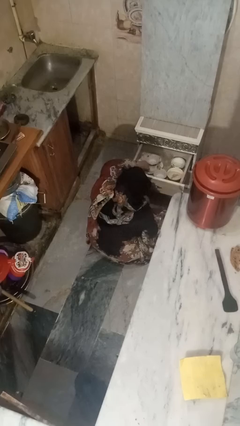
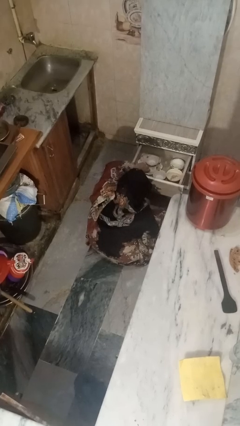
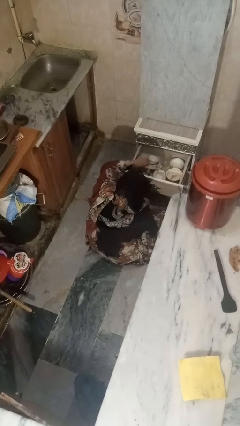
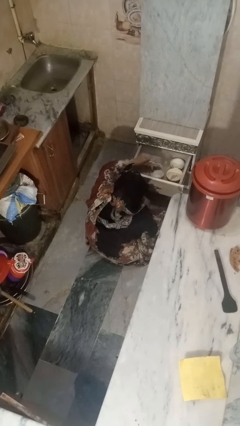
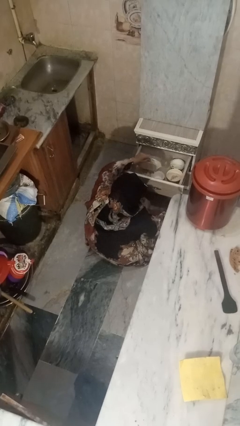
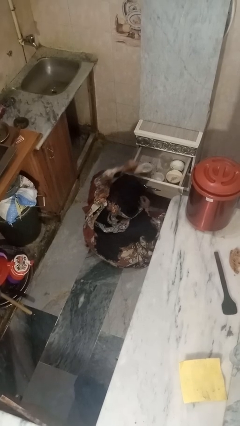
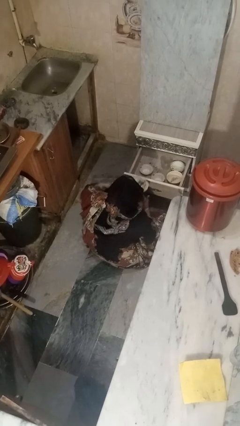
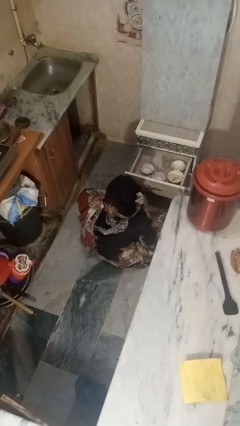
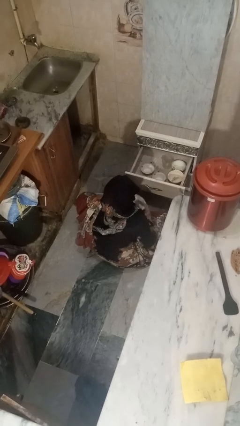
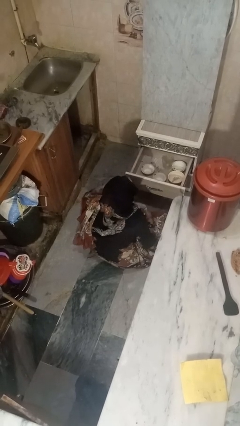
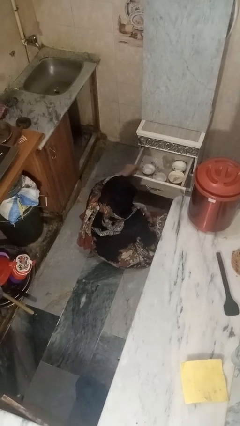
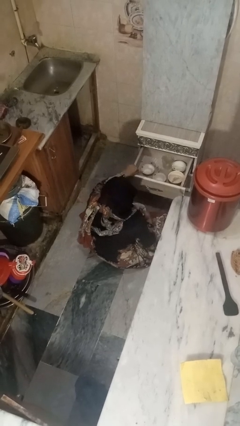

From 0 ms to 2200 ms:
person puts object into kitchen drawer

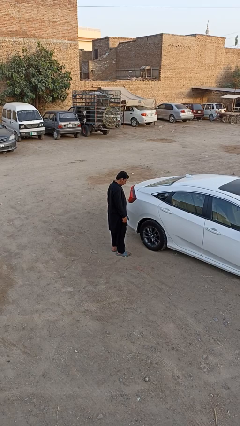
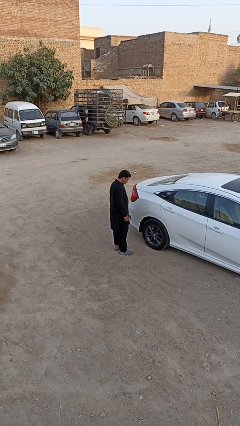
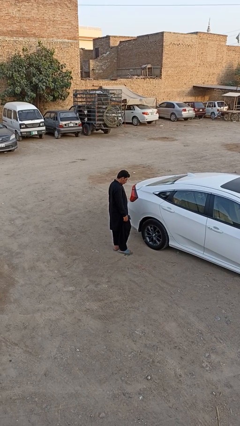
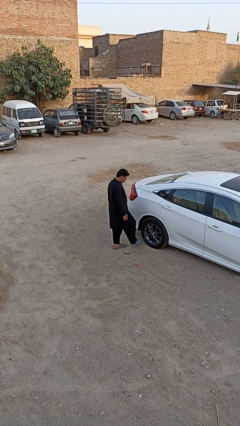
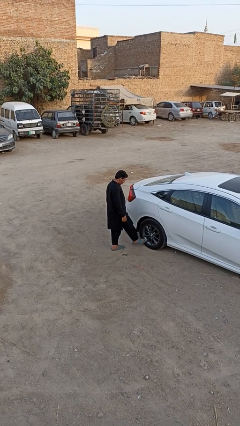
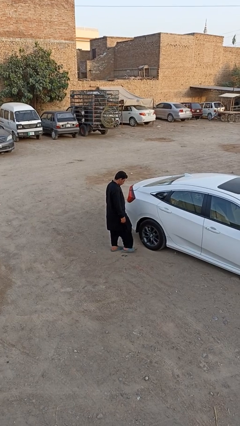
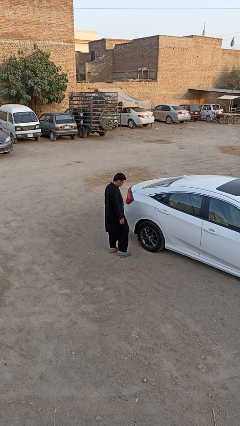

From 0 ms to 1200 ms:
person kicks car tires

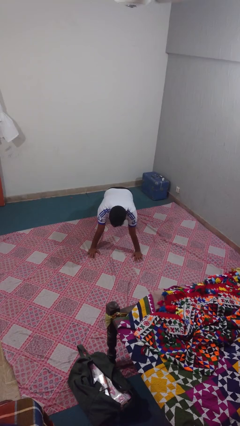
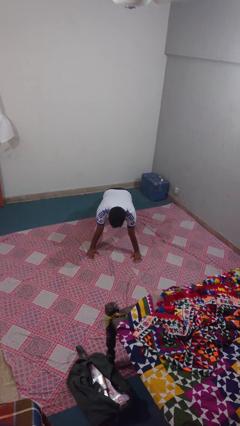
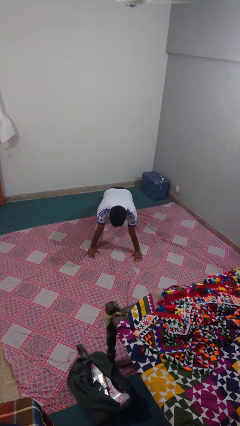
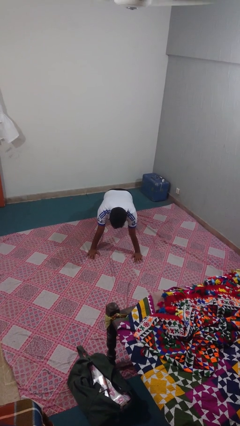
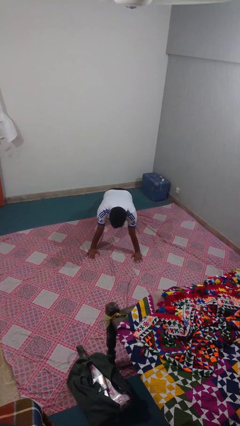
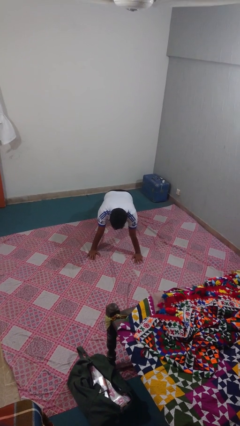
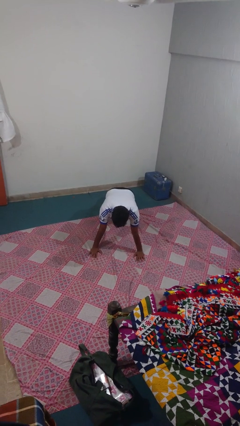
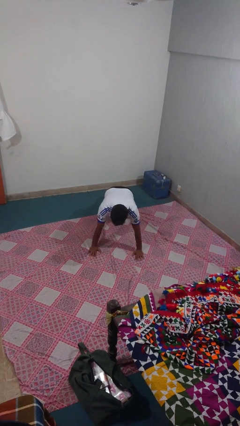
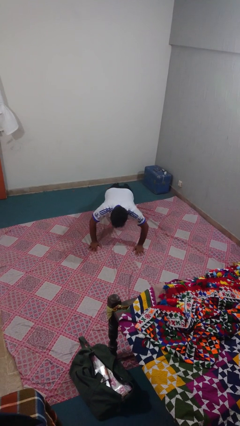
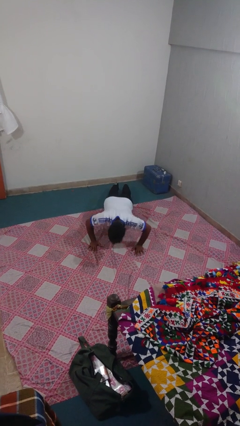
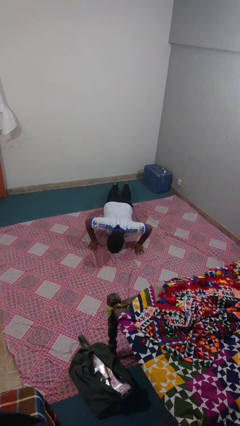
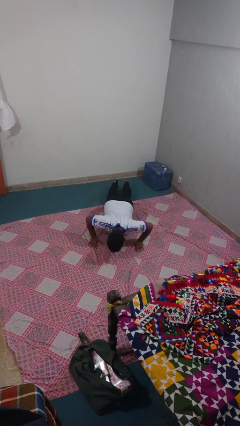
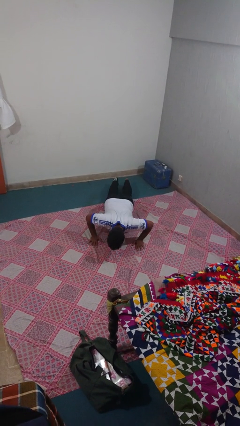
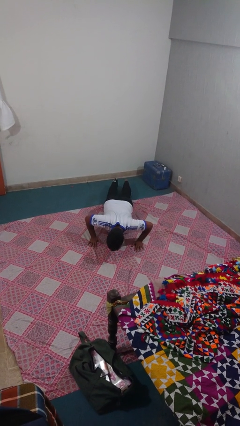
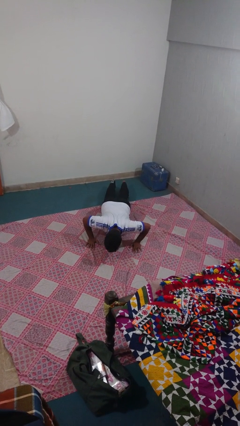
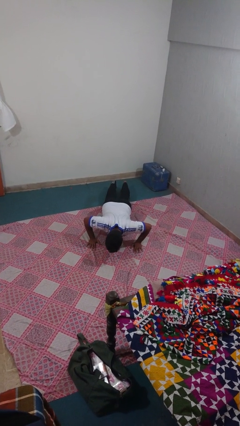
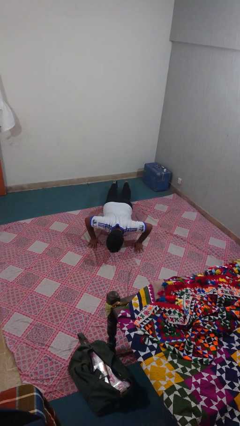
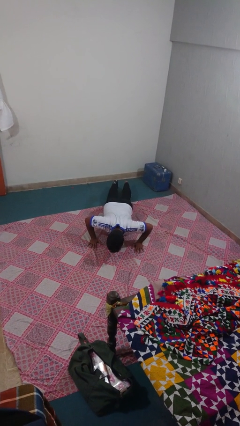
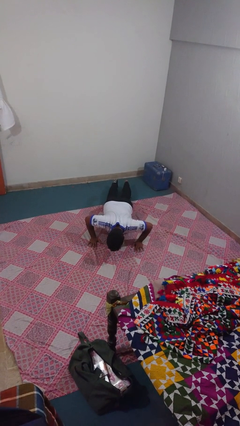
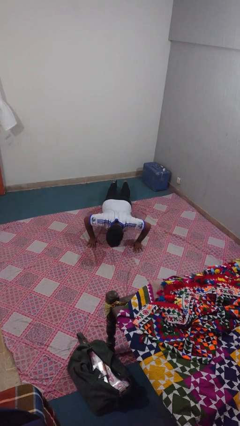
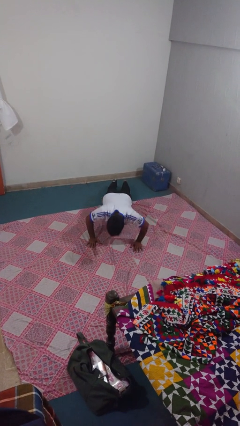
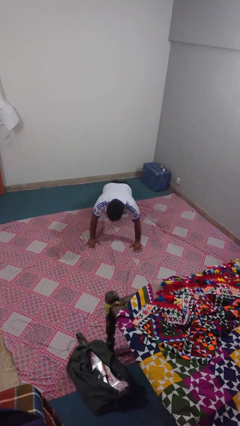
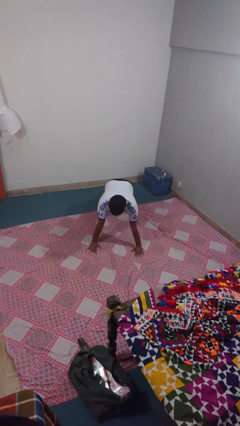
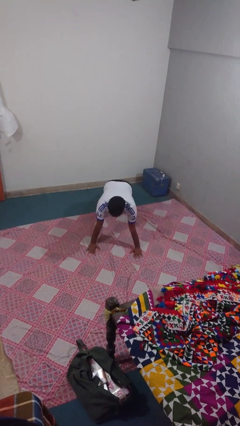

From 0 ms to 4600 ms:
person exercises with pushup

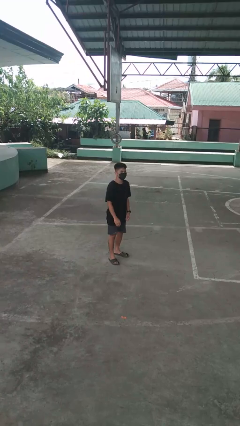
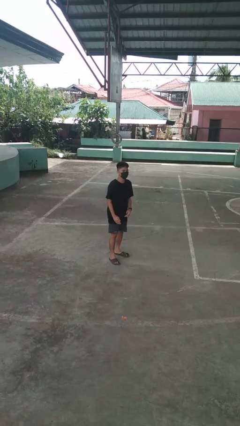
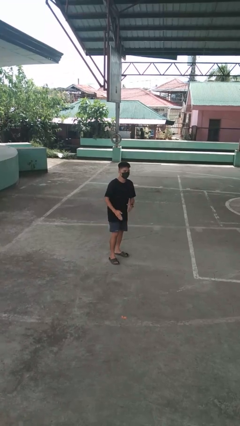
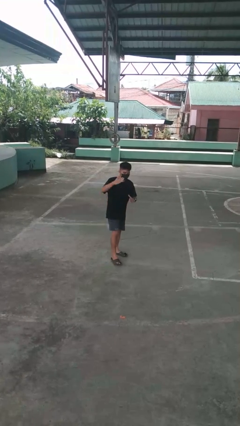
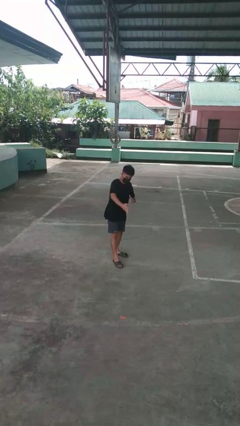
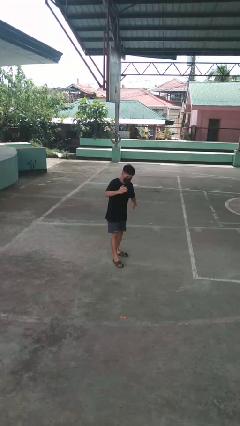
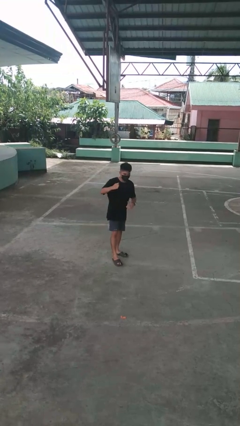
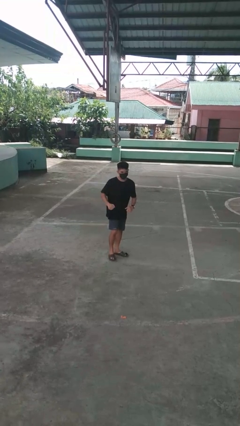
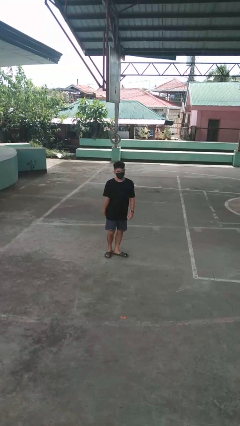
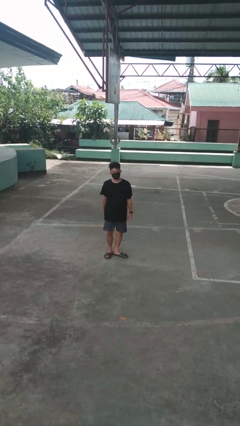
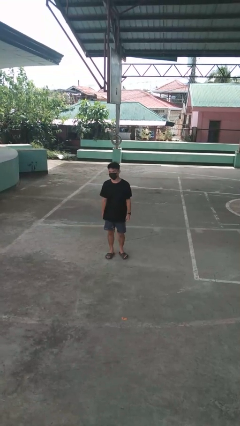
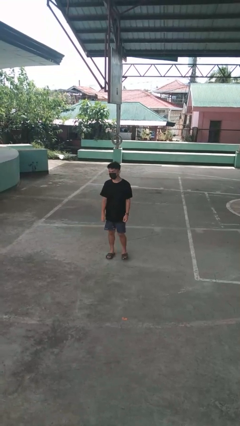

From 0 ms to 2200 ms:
person karate chop

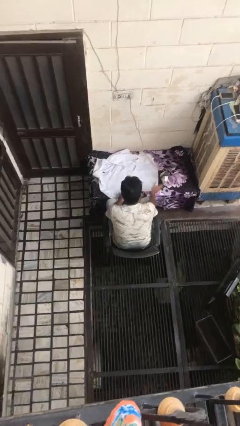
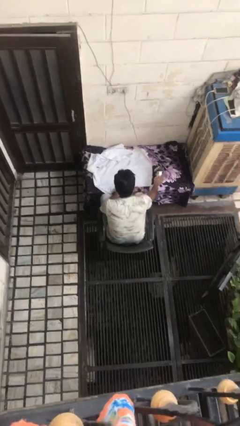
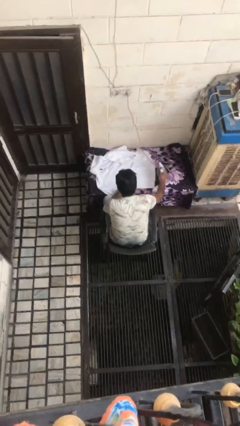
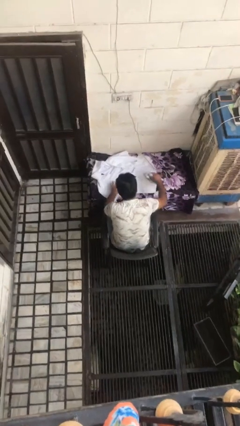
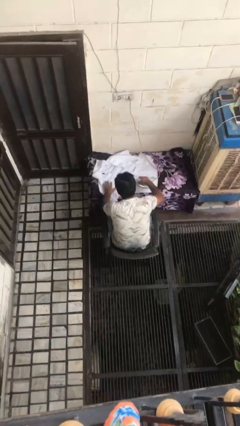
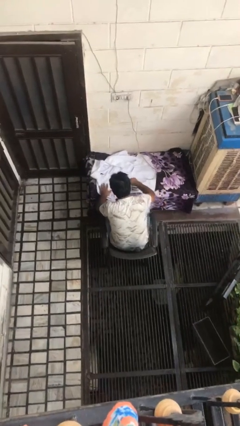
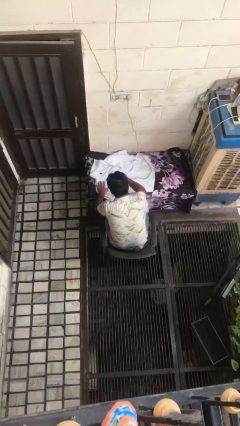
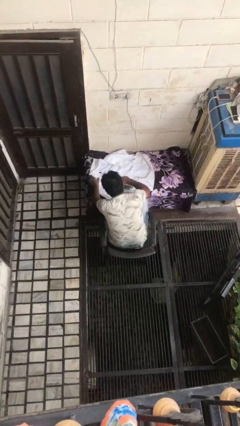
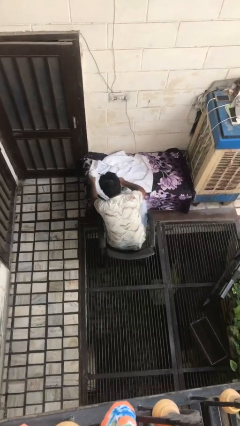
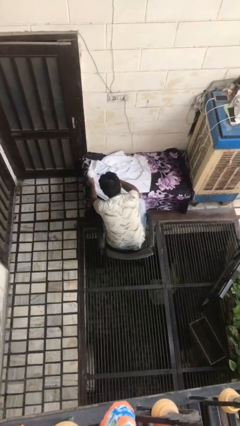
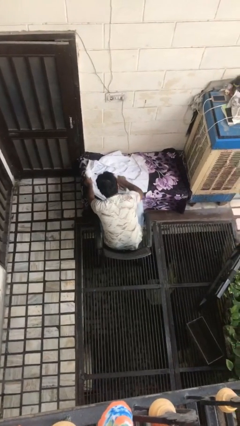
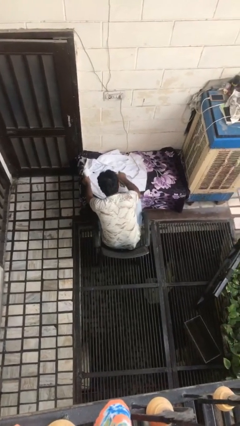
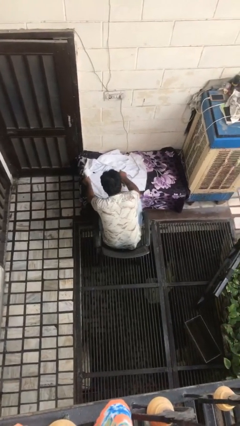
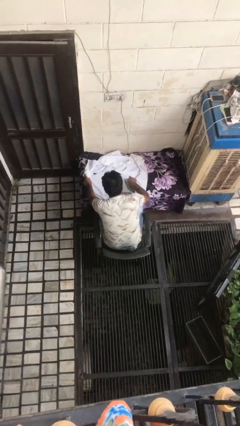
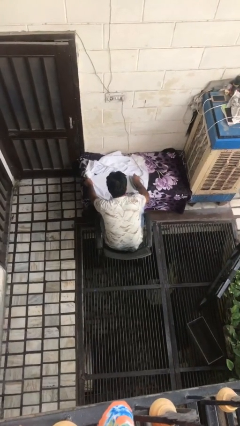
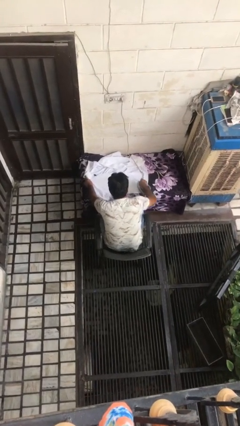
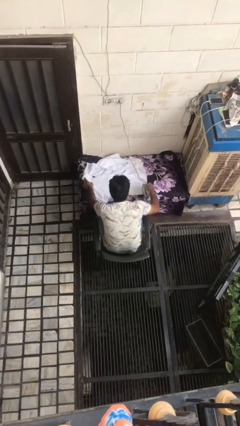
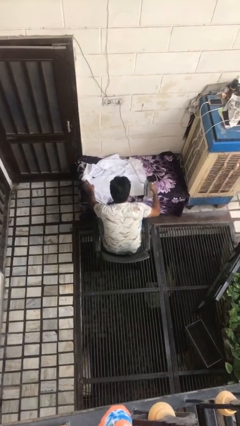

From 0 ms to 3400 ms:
person irons clothes

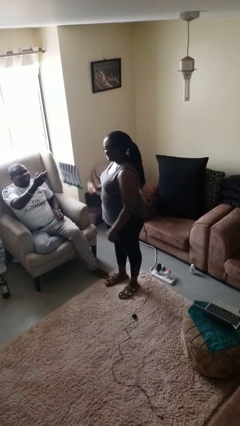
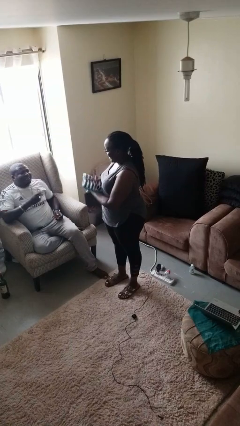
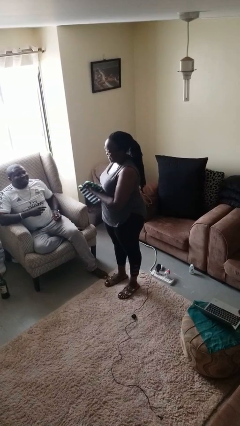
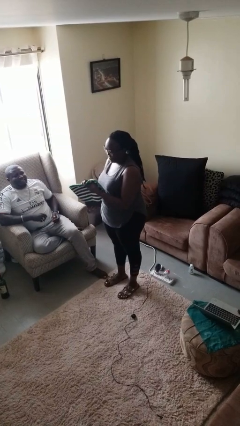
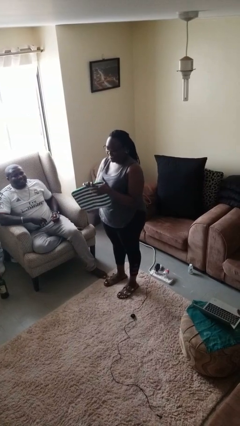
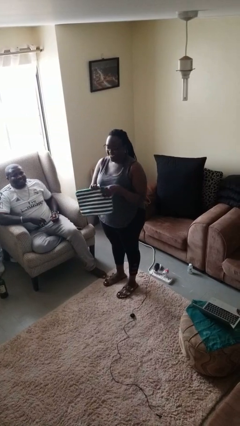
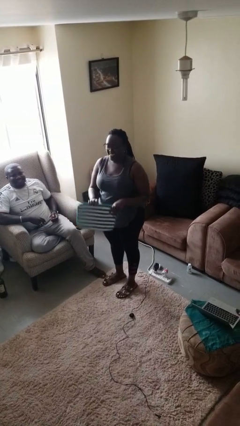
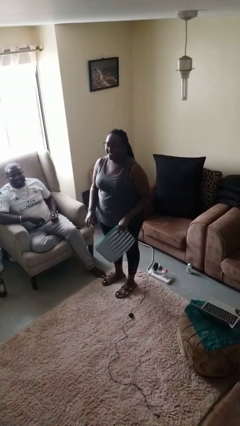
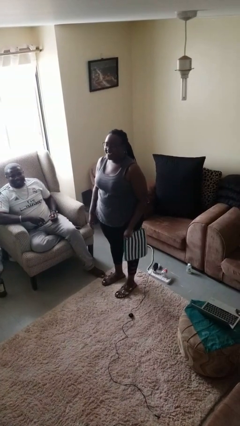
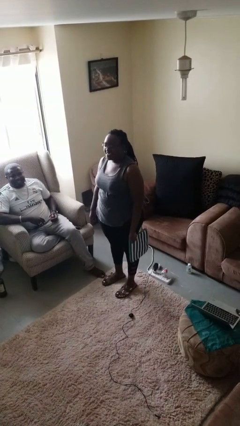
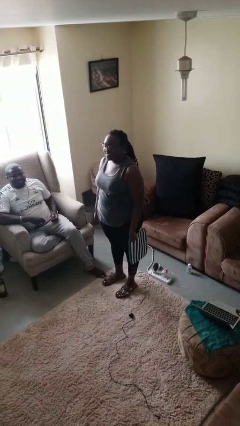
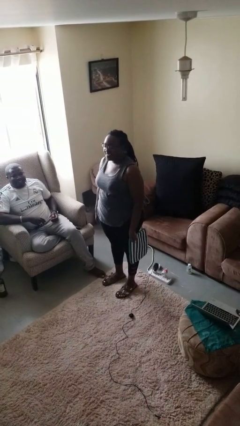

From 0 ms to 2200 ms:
person catches object from person

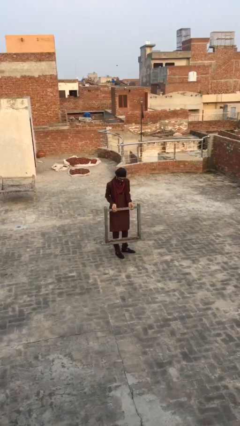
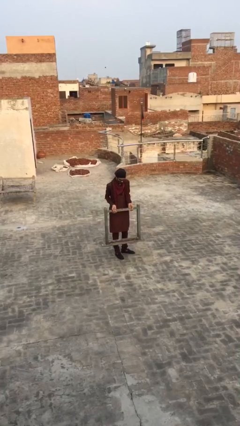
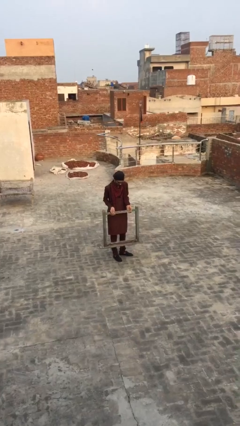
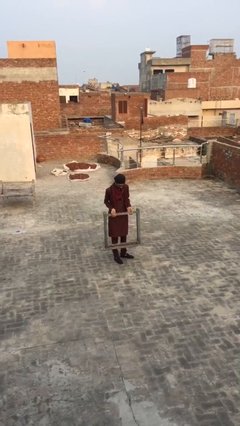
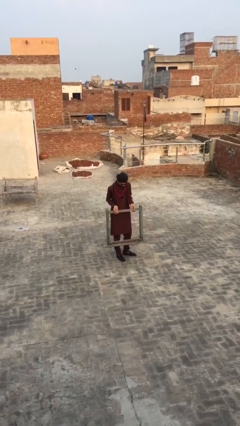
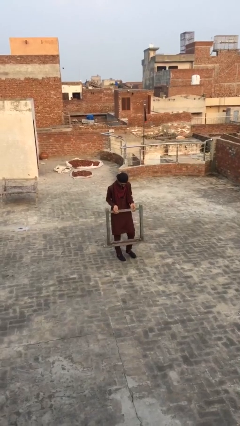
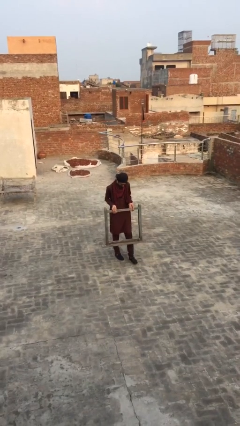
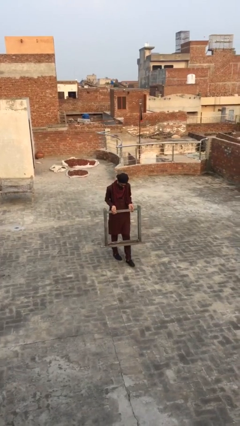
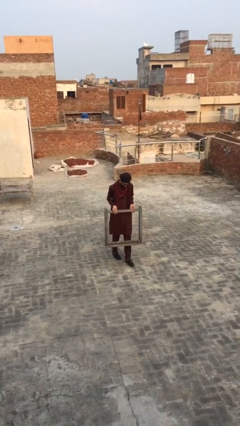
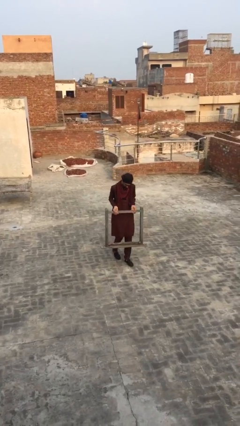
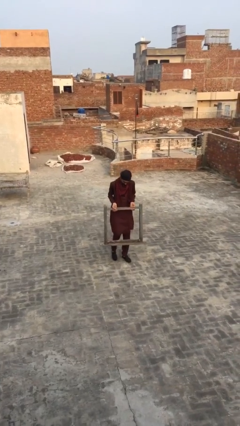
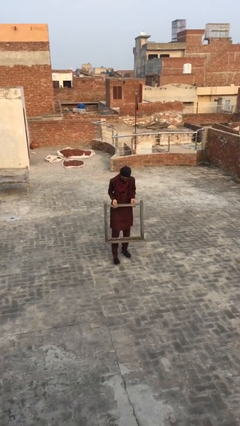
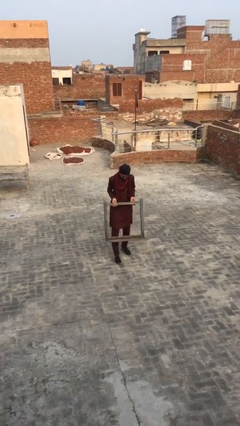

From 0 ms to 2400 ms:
person carries heavy object
